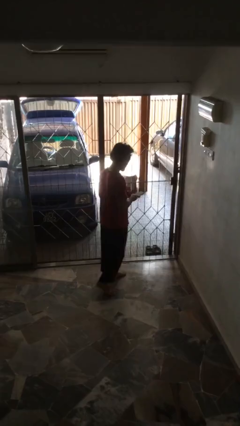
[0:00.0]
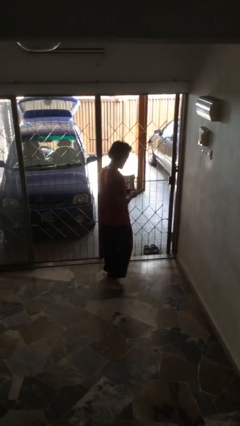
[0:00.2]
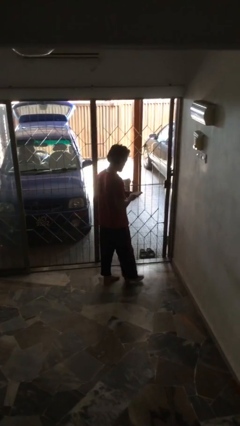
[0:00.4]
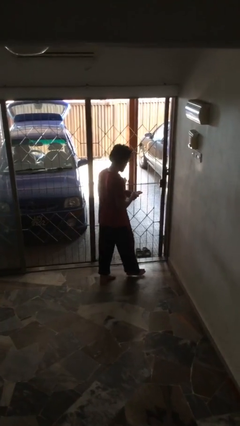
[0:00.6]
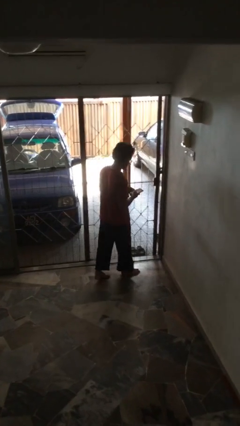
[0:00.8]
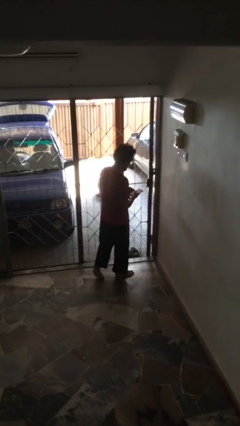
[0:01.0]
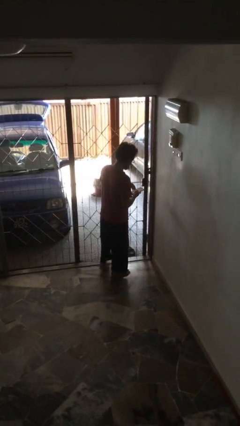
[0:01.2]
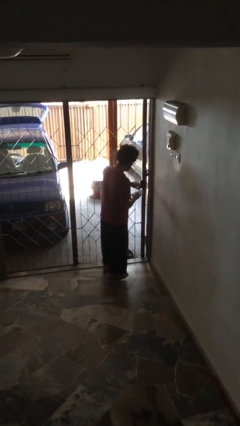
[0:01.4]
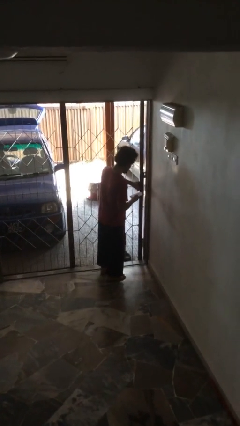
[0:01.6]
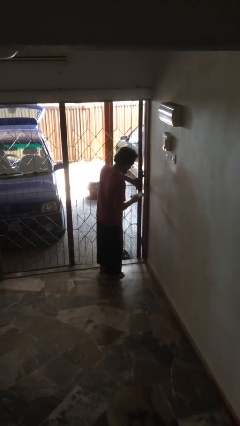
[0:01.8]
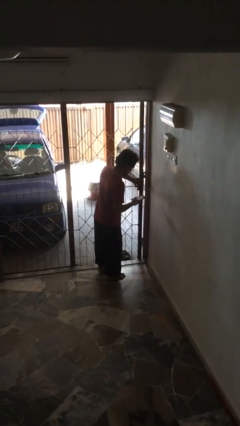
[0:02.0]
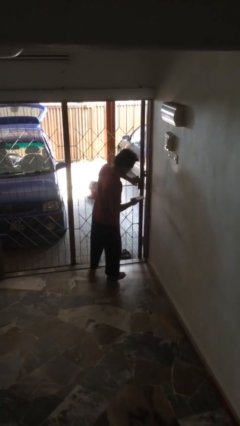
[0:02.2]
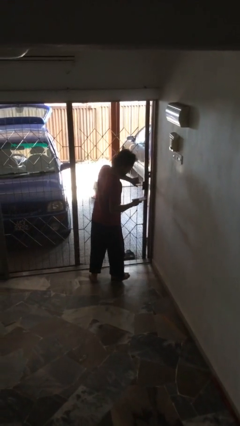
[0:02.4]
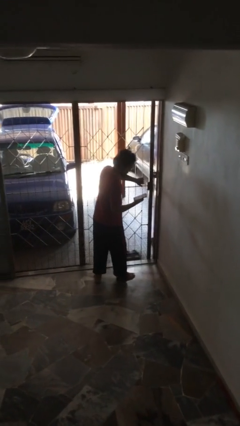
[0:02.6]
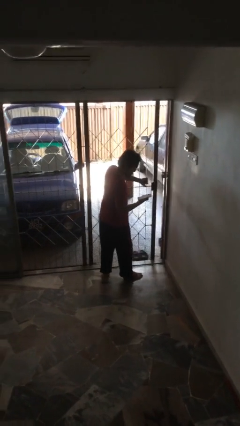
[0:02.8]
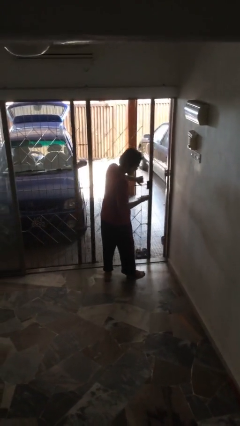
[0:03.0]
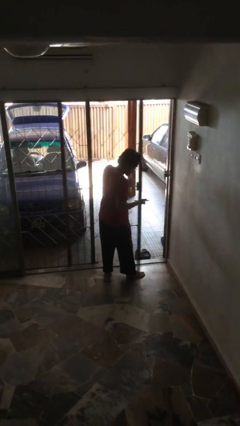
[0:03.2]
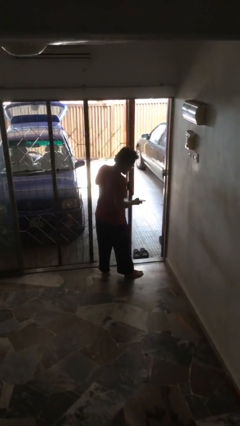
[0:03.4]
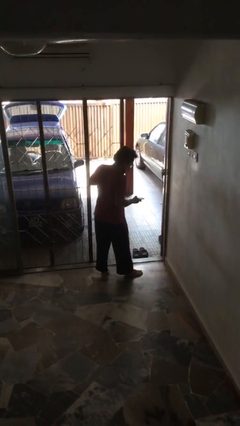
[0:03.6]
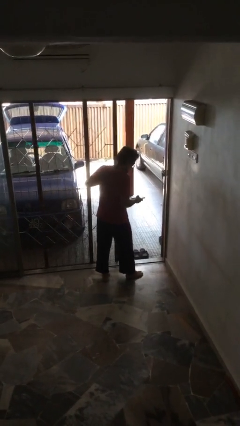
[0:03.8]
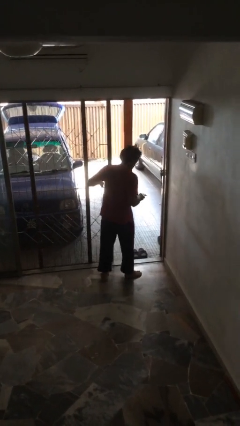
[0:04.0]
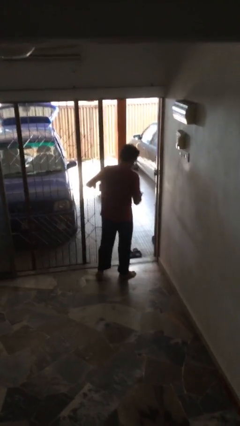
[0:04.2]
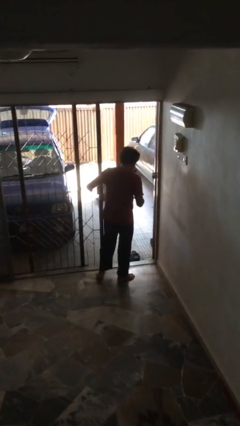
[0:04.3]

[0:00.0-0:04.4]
person opens facility door

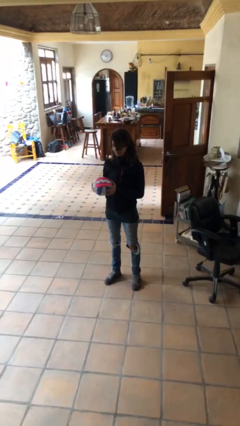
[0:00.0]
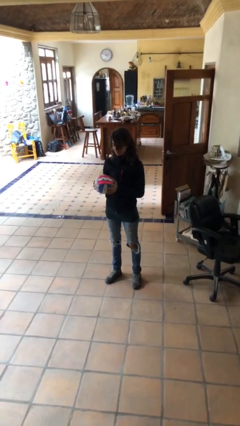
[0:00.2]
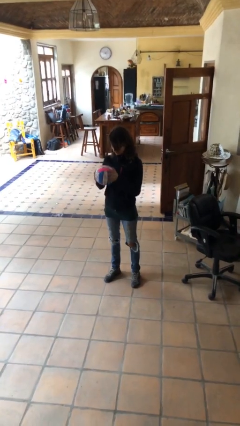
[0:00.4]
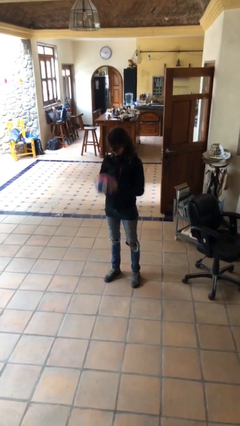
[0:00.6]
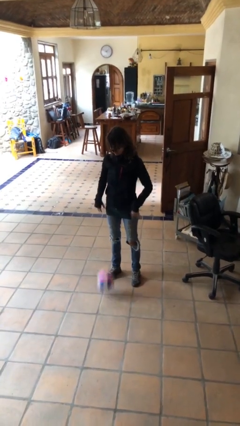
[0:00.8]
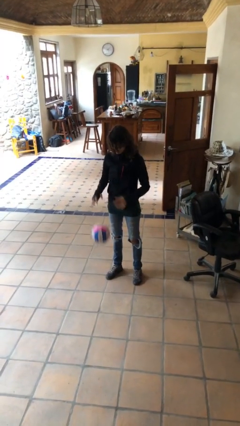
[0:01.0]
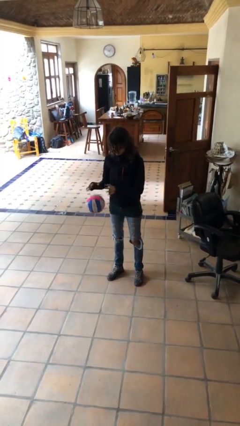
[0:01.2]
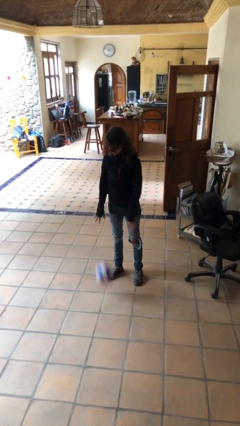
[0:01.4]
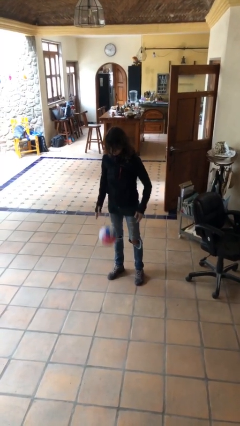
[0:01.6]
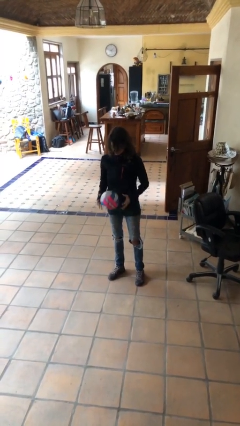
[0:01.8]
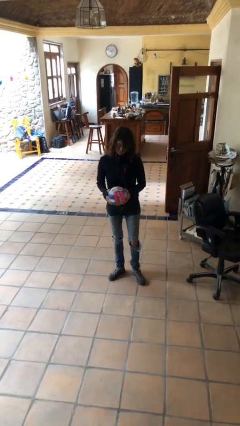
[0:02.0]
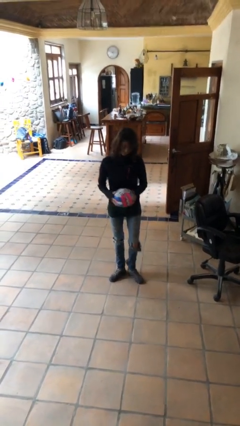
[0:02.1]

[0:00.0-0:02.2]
person bounces ball on floor

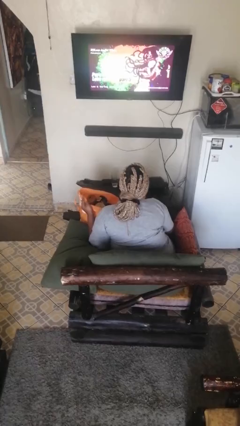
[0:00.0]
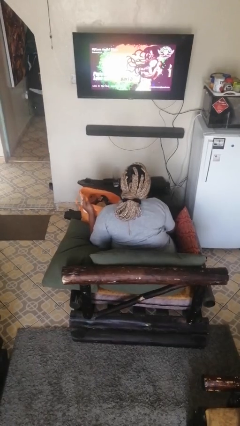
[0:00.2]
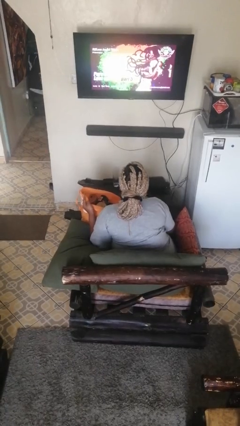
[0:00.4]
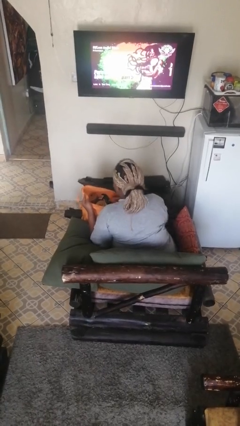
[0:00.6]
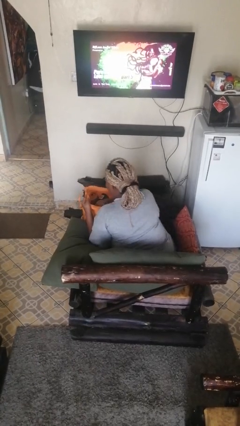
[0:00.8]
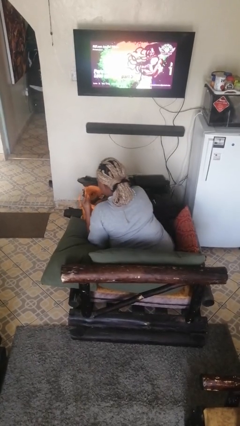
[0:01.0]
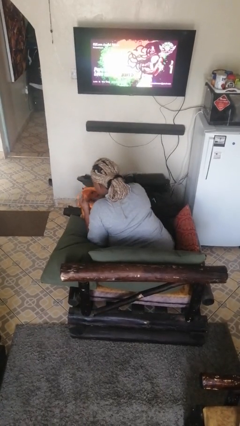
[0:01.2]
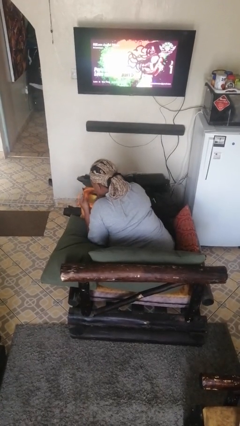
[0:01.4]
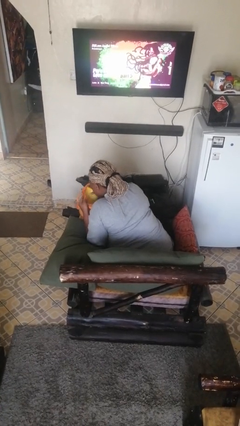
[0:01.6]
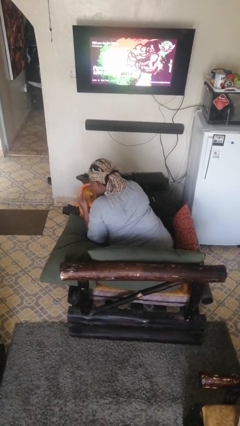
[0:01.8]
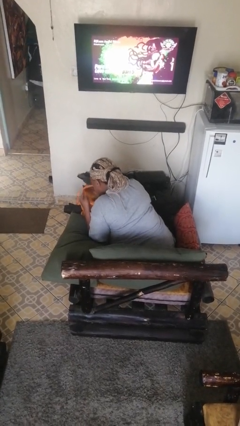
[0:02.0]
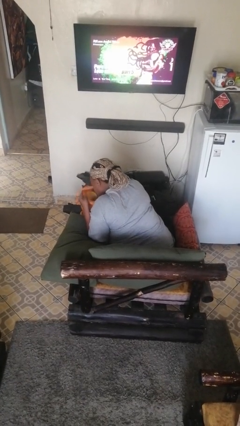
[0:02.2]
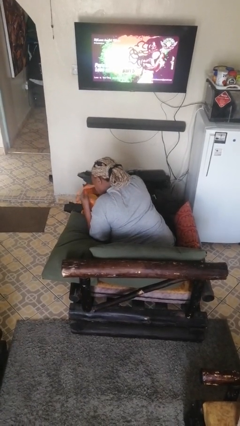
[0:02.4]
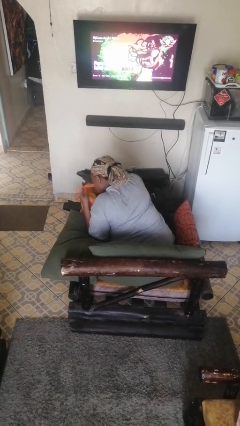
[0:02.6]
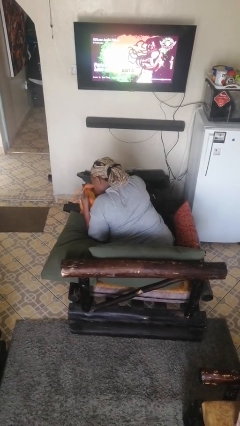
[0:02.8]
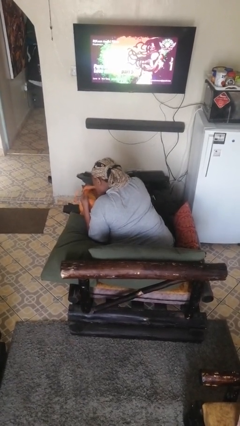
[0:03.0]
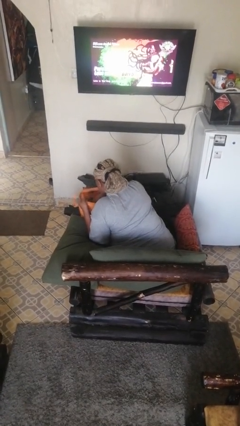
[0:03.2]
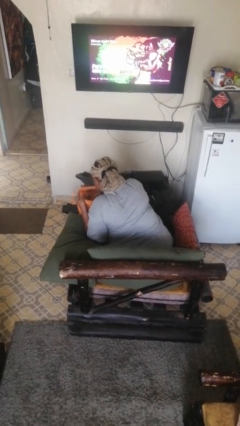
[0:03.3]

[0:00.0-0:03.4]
person searches in bag

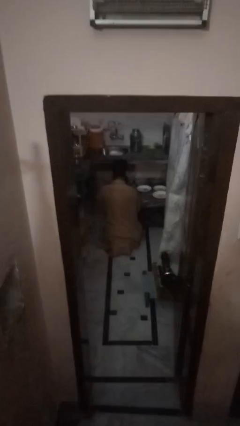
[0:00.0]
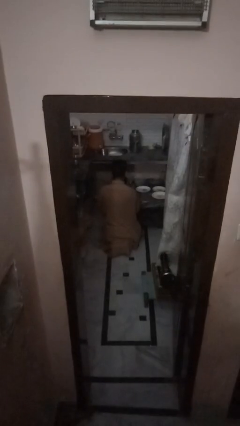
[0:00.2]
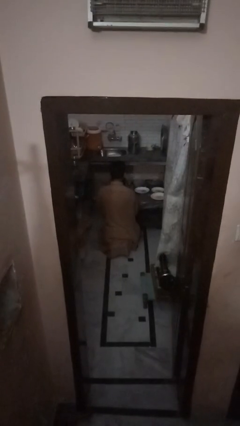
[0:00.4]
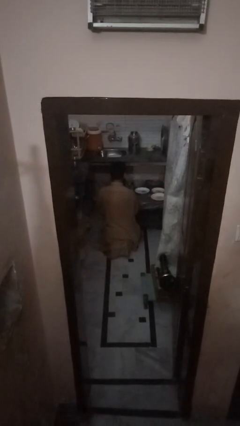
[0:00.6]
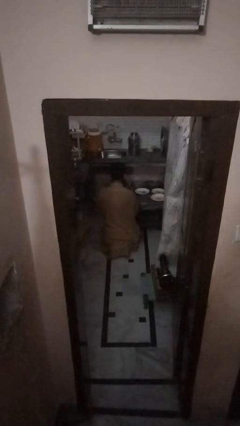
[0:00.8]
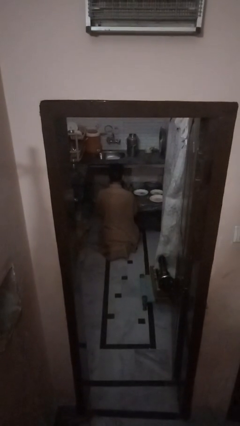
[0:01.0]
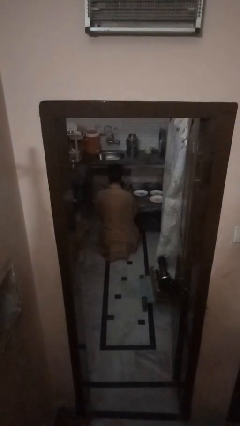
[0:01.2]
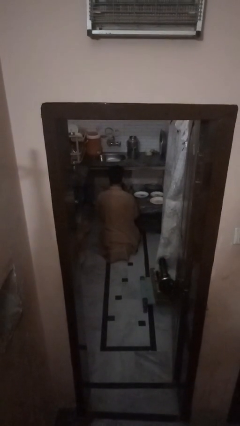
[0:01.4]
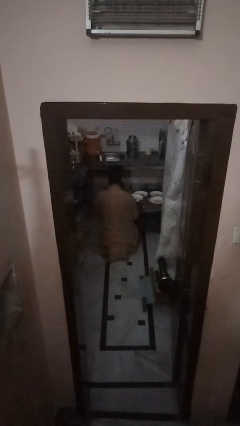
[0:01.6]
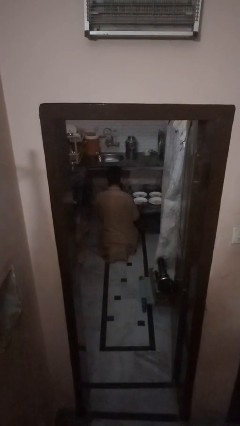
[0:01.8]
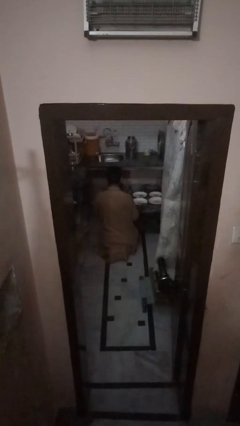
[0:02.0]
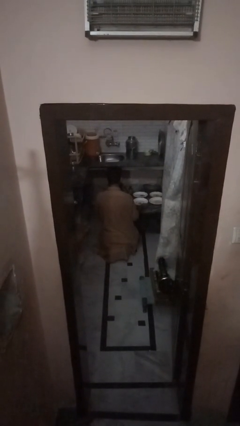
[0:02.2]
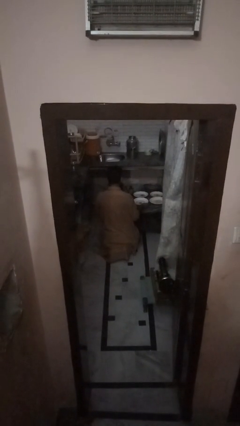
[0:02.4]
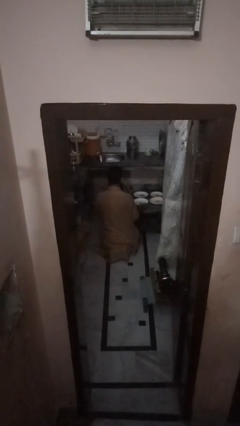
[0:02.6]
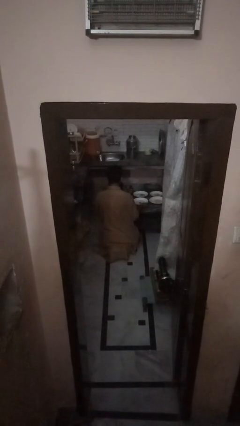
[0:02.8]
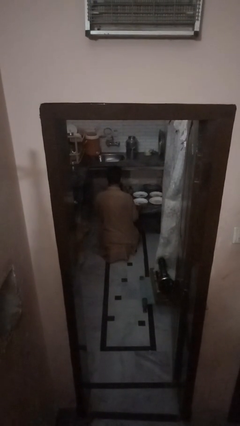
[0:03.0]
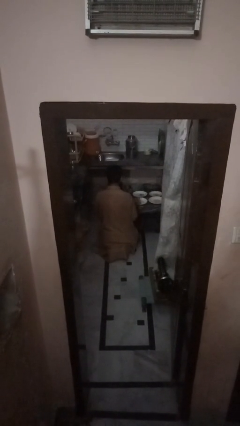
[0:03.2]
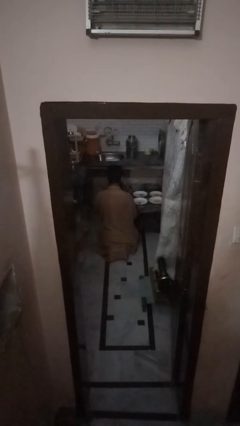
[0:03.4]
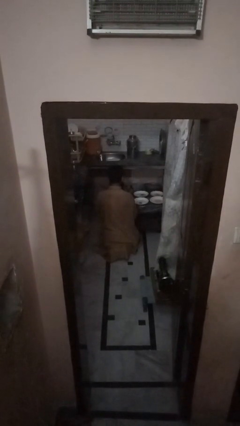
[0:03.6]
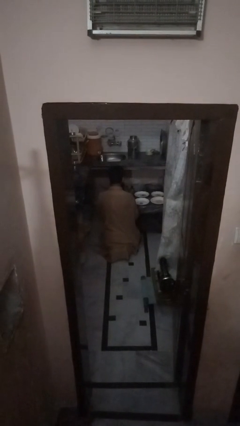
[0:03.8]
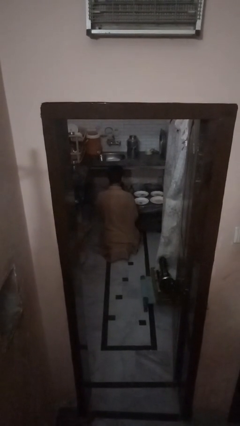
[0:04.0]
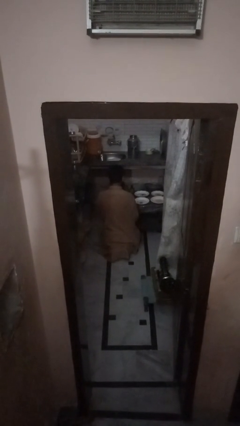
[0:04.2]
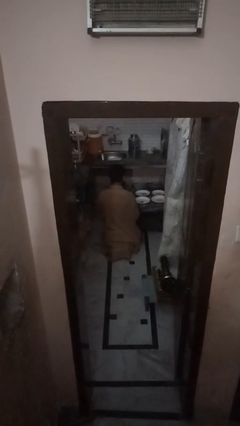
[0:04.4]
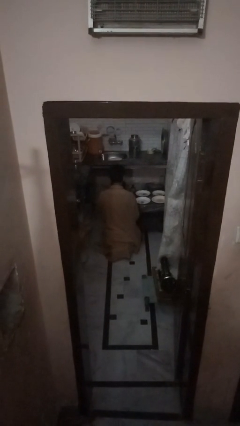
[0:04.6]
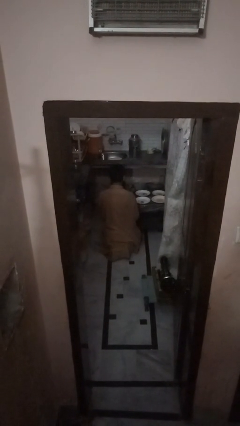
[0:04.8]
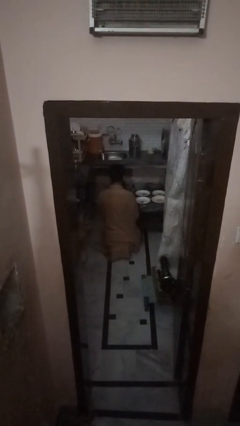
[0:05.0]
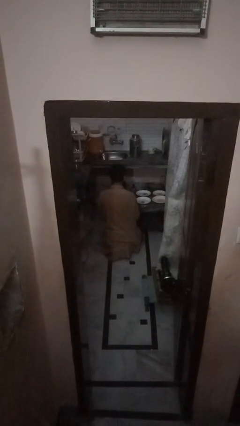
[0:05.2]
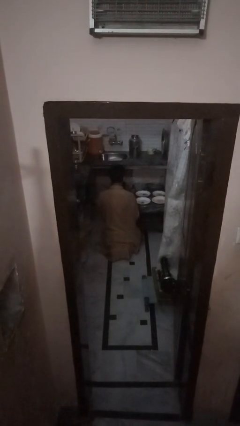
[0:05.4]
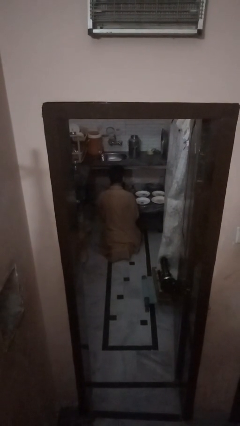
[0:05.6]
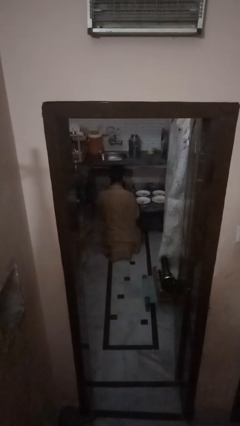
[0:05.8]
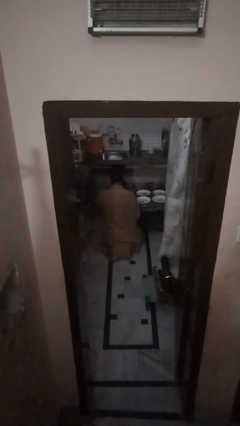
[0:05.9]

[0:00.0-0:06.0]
person sets table

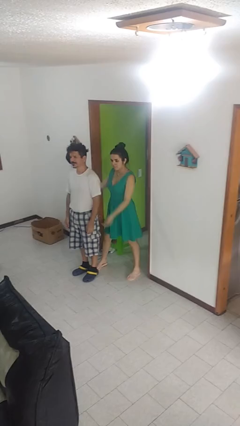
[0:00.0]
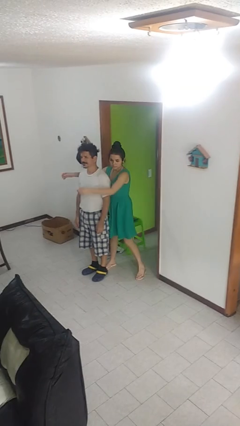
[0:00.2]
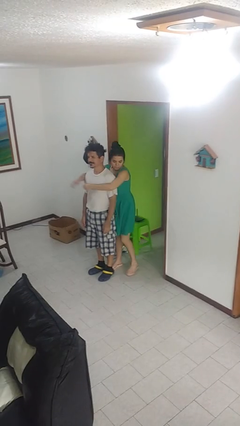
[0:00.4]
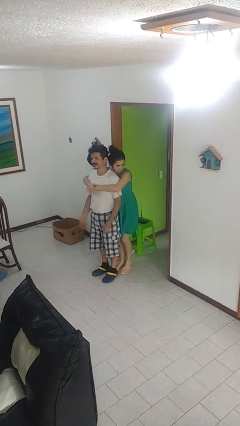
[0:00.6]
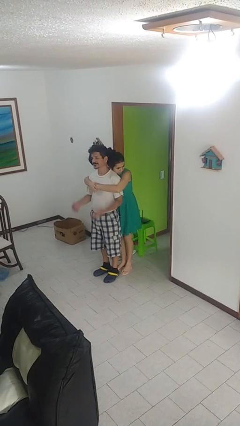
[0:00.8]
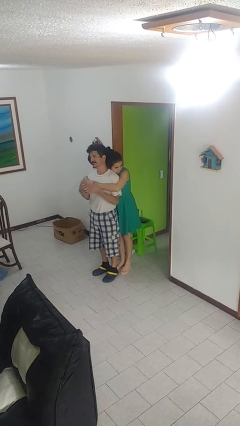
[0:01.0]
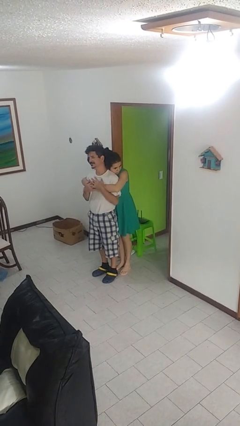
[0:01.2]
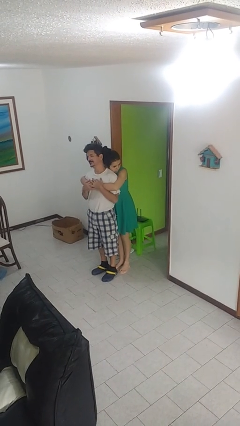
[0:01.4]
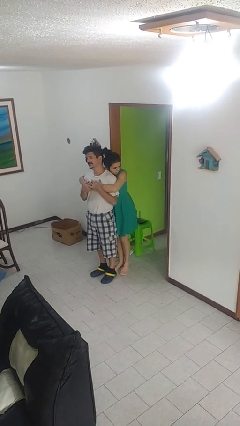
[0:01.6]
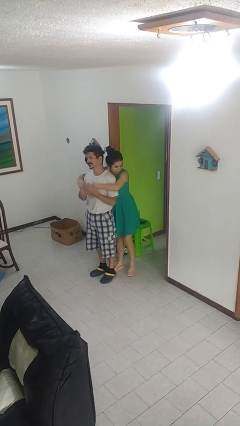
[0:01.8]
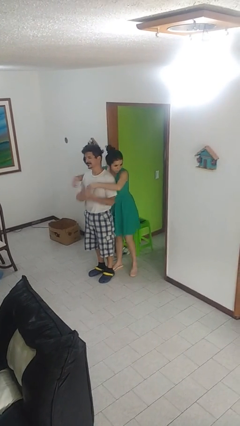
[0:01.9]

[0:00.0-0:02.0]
person hugs person from behind
